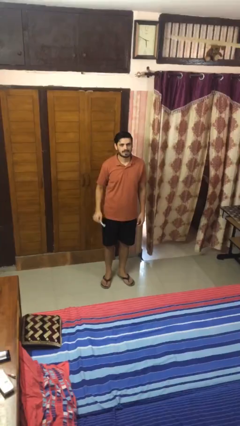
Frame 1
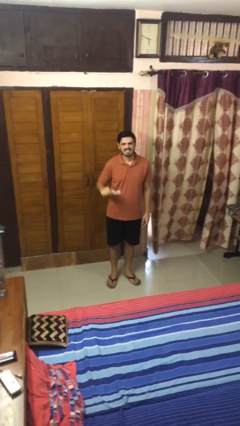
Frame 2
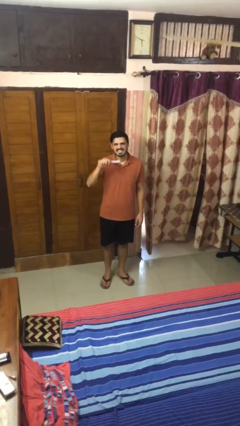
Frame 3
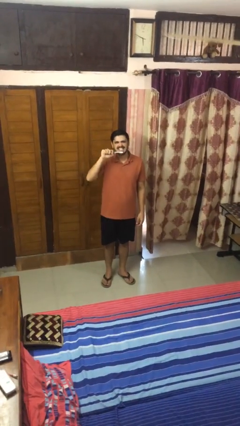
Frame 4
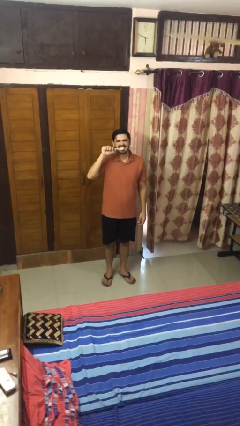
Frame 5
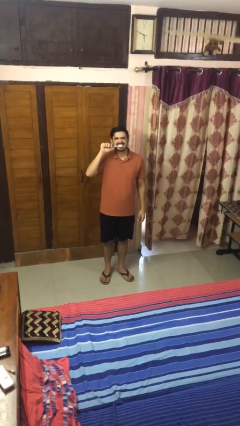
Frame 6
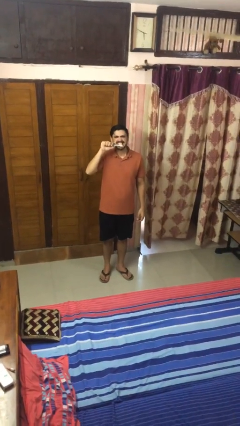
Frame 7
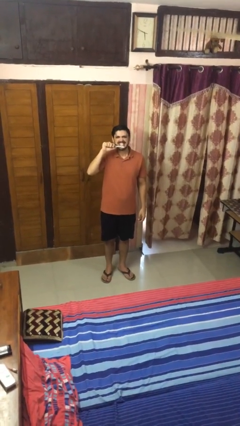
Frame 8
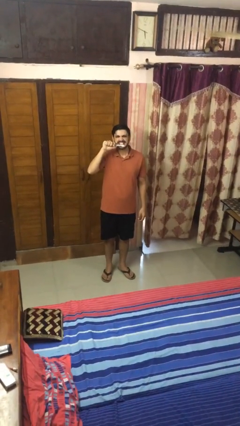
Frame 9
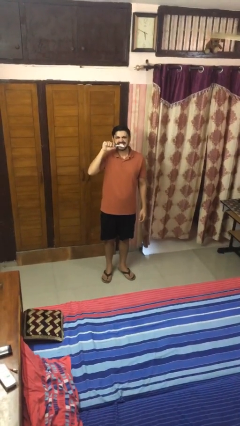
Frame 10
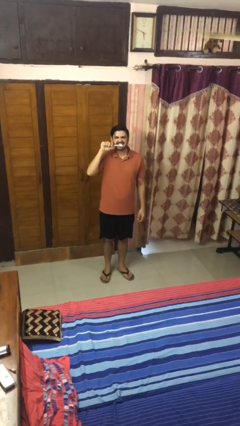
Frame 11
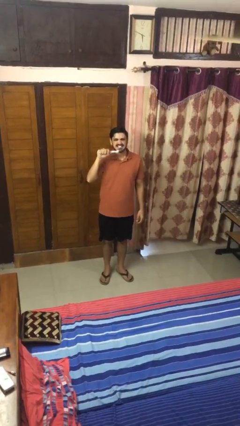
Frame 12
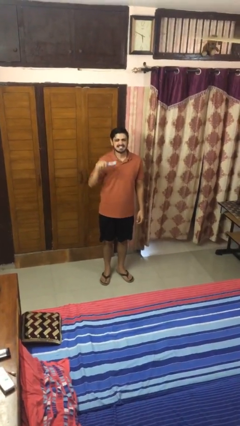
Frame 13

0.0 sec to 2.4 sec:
person brushes teeth

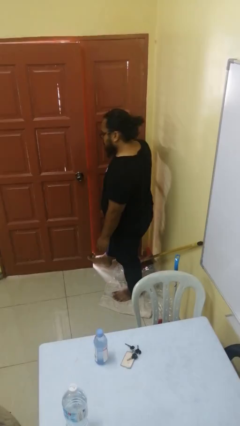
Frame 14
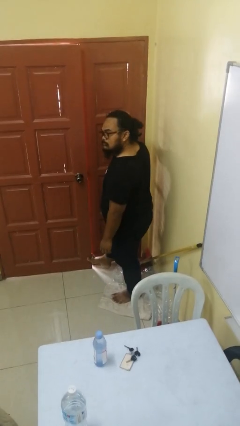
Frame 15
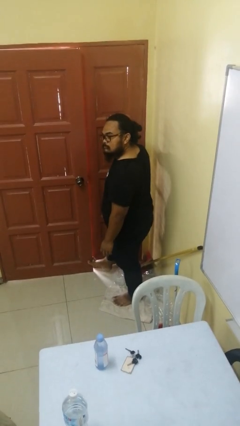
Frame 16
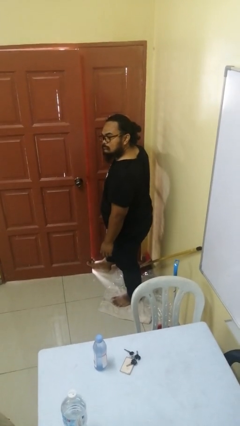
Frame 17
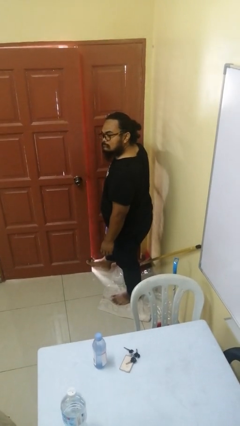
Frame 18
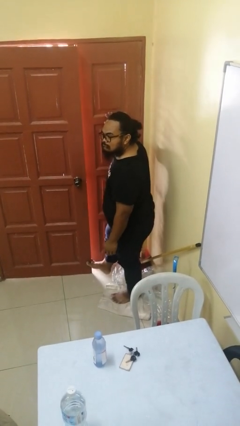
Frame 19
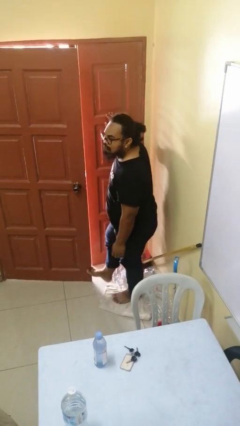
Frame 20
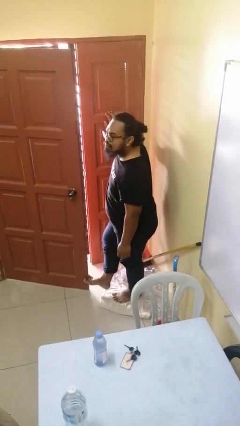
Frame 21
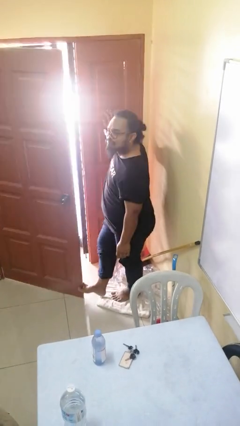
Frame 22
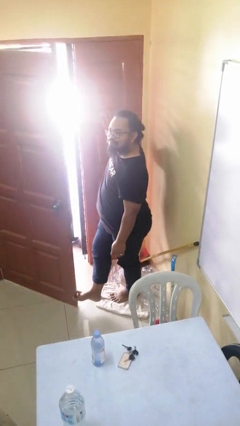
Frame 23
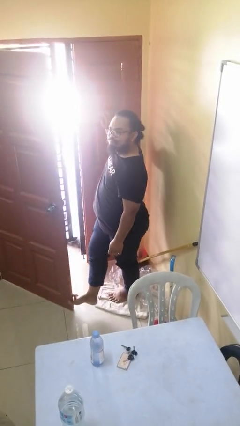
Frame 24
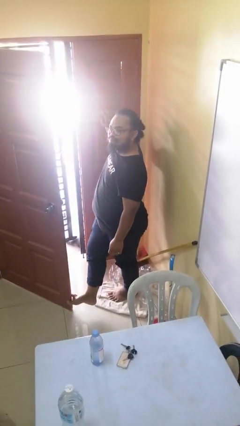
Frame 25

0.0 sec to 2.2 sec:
person opens facility door

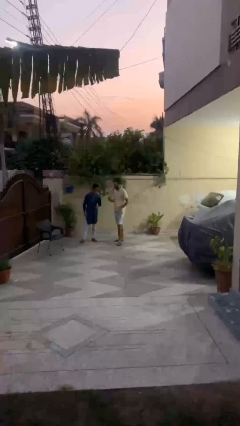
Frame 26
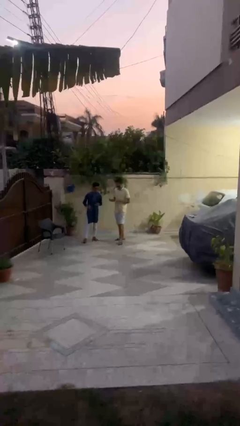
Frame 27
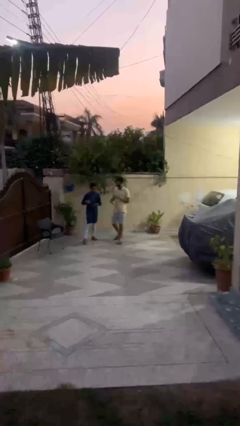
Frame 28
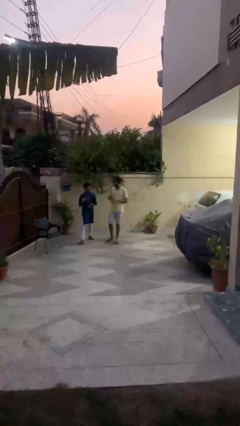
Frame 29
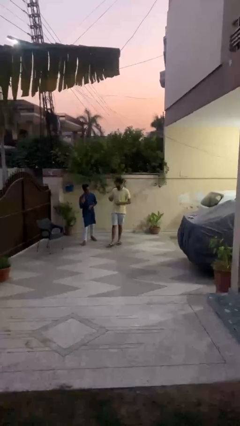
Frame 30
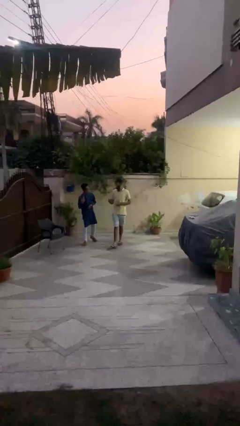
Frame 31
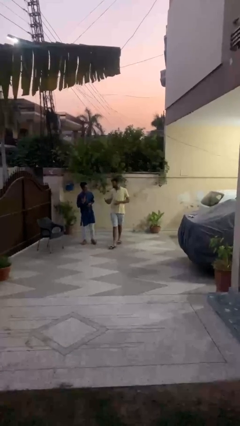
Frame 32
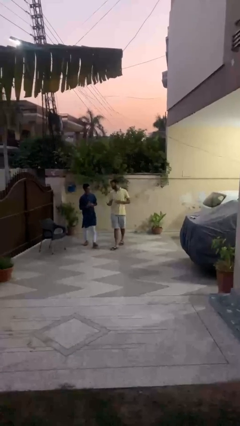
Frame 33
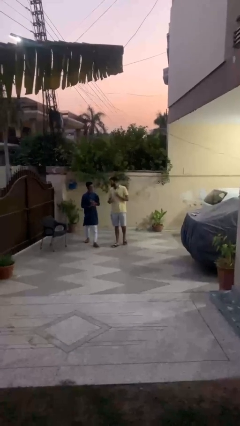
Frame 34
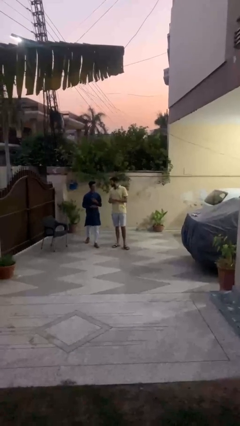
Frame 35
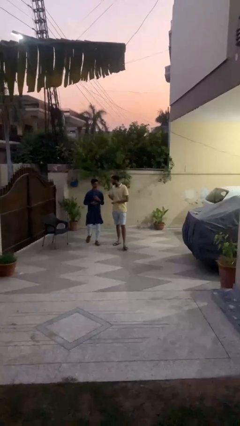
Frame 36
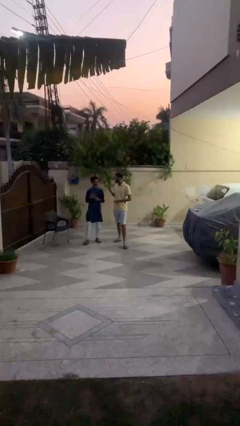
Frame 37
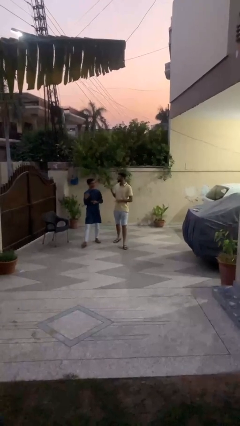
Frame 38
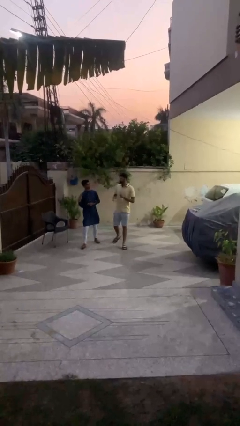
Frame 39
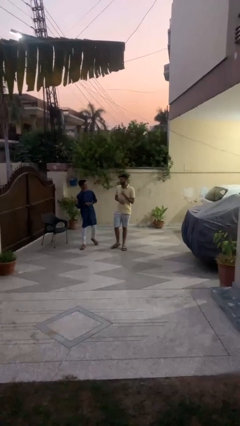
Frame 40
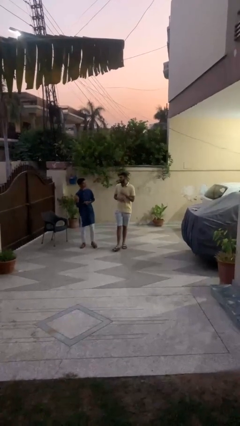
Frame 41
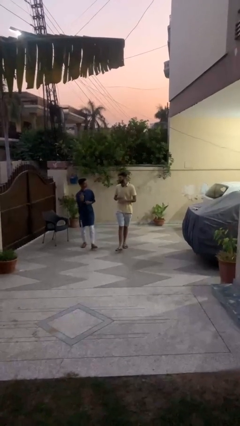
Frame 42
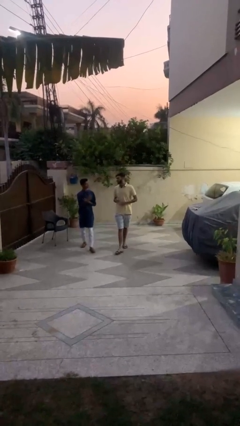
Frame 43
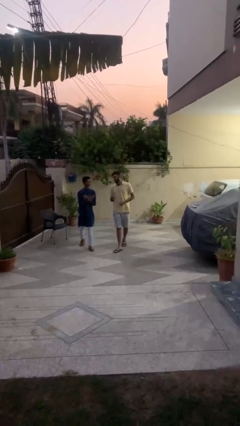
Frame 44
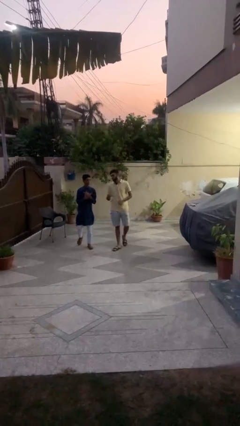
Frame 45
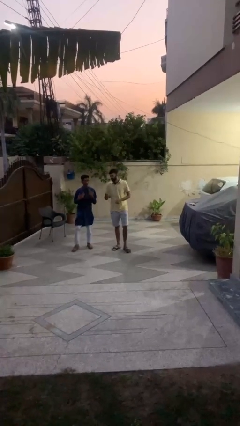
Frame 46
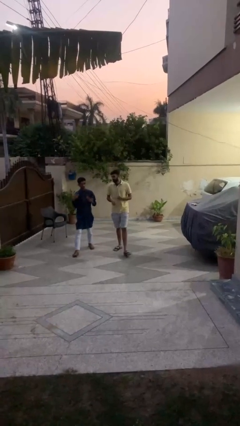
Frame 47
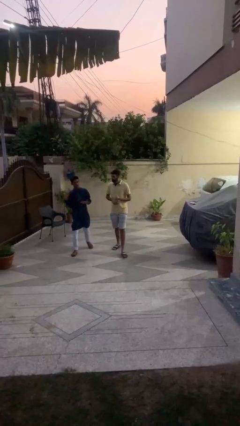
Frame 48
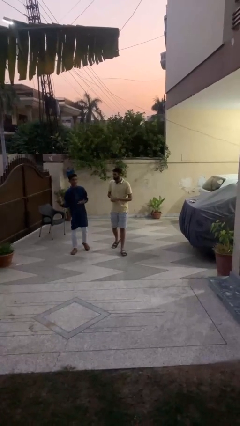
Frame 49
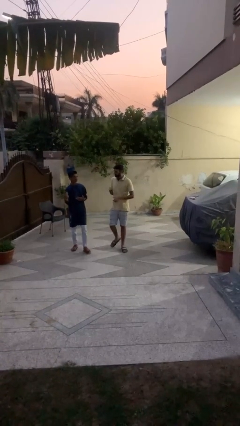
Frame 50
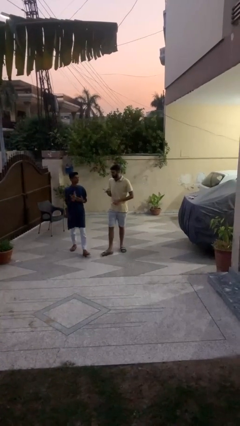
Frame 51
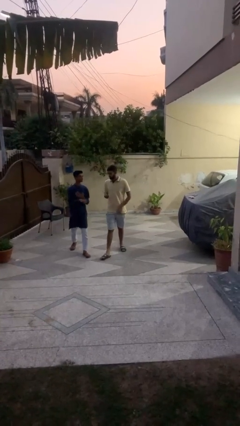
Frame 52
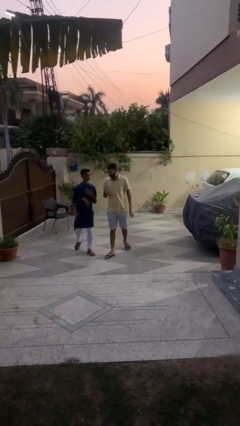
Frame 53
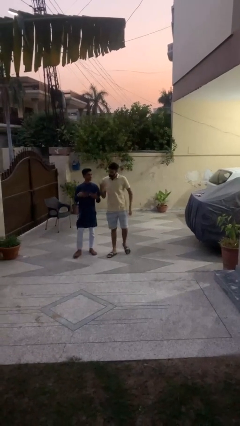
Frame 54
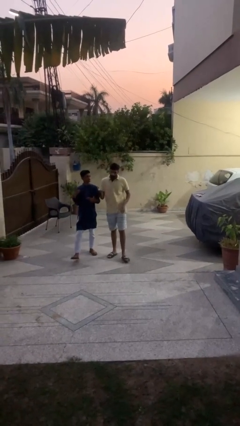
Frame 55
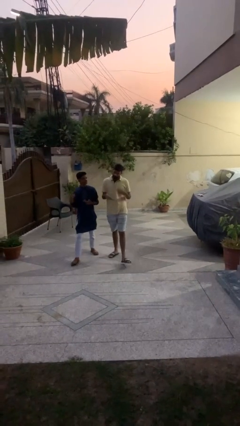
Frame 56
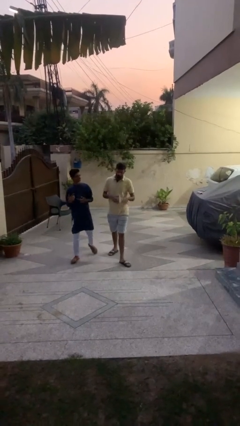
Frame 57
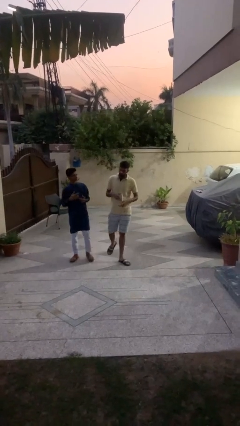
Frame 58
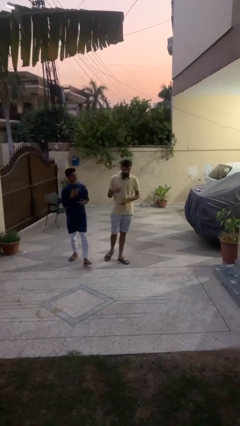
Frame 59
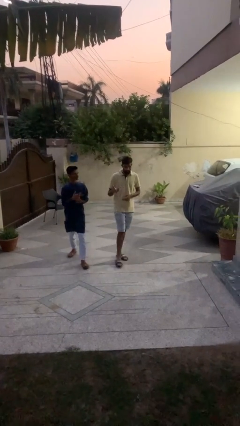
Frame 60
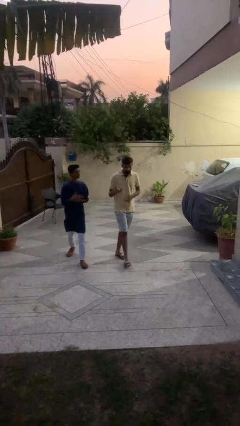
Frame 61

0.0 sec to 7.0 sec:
person talks to person

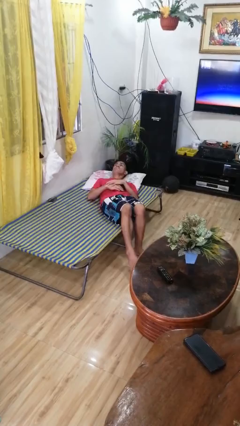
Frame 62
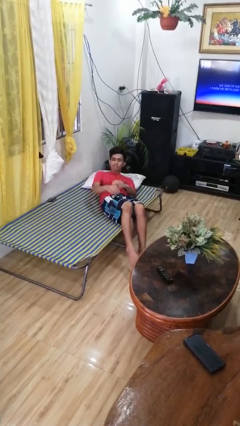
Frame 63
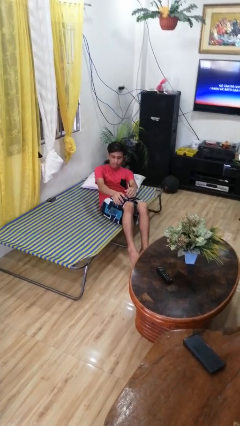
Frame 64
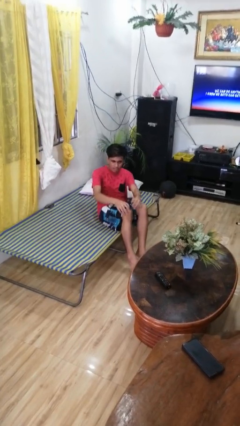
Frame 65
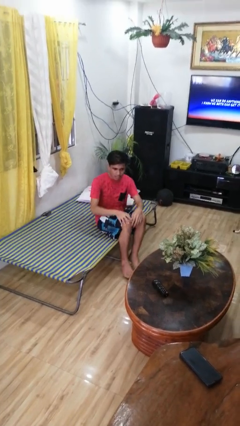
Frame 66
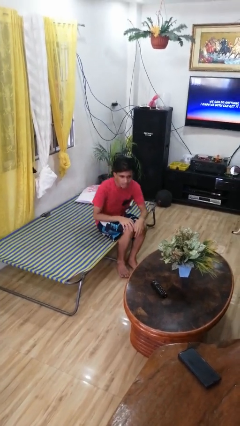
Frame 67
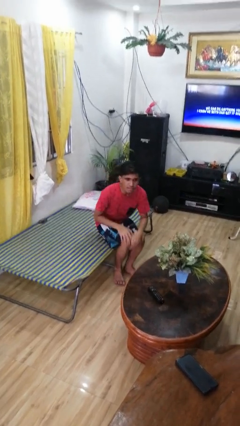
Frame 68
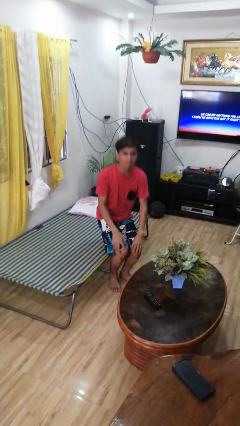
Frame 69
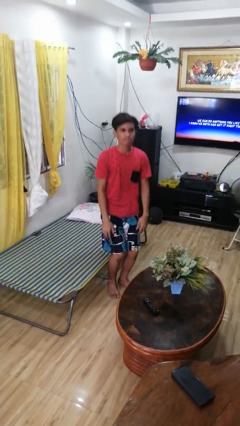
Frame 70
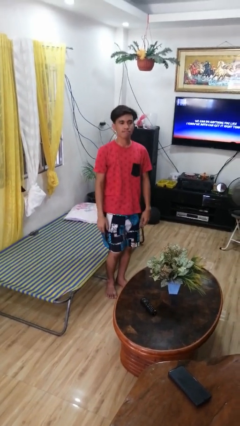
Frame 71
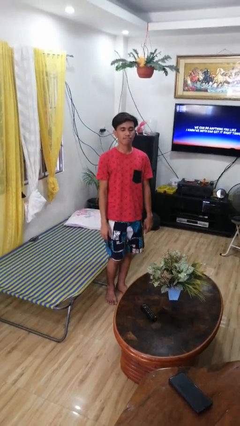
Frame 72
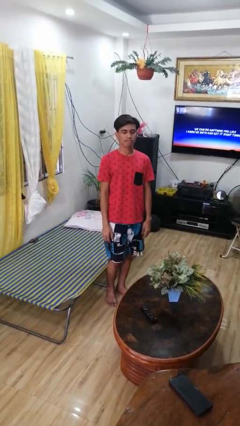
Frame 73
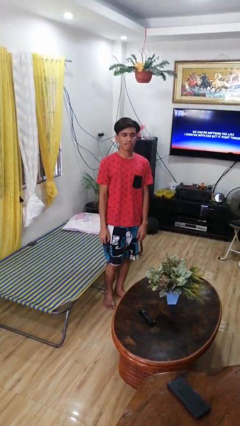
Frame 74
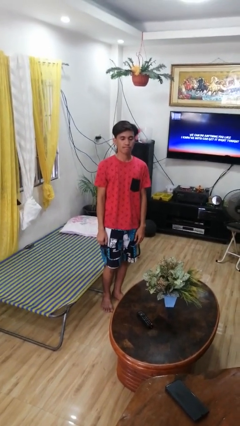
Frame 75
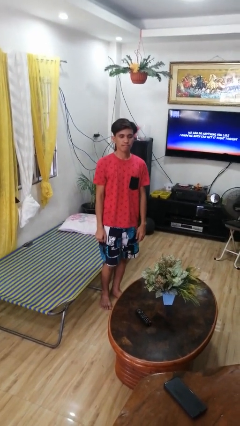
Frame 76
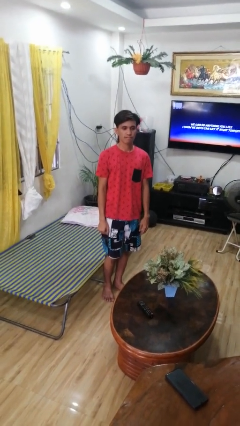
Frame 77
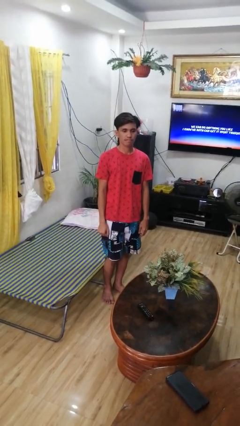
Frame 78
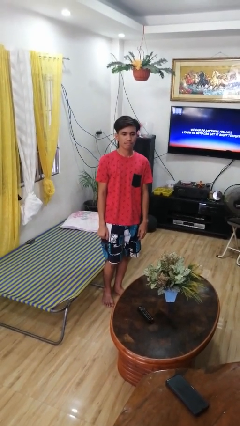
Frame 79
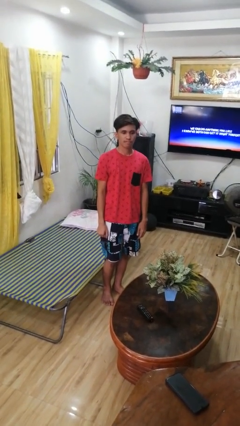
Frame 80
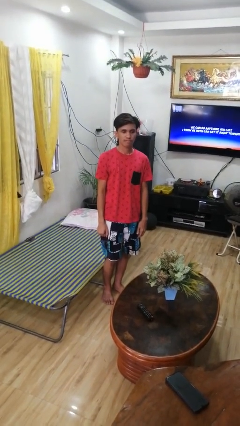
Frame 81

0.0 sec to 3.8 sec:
person stands up

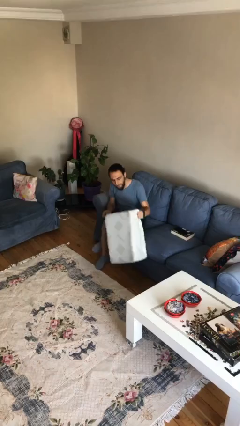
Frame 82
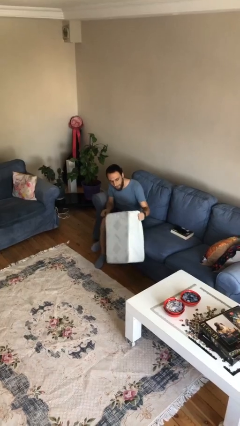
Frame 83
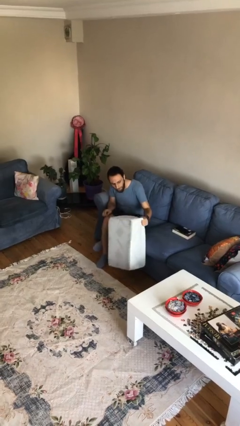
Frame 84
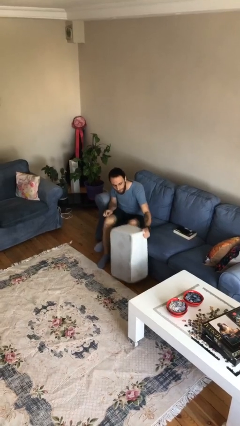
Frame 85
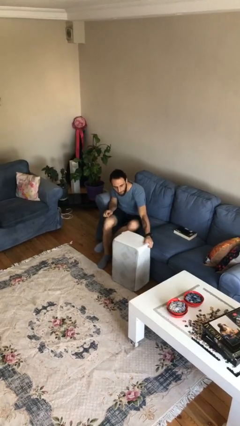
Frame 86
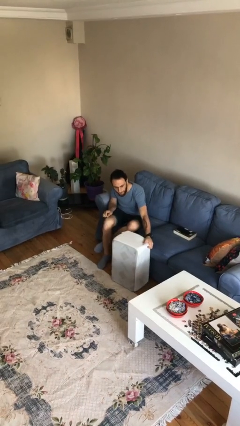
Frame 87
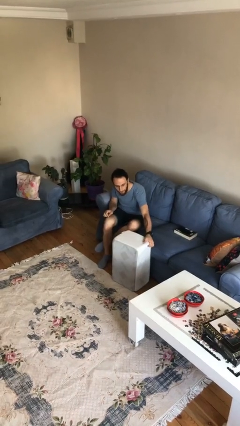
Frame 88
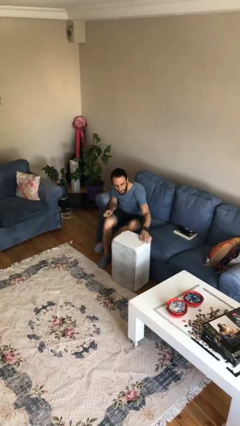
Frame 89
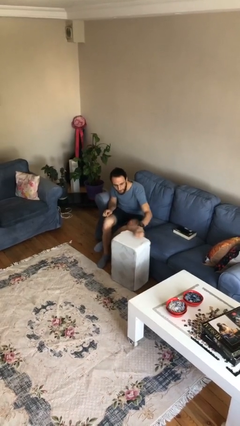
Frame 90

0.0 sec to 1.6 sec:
person puts down object on floor

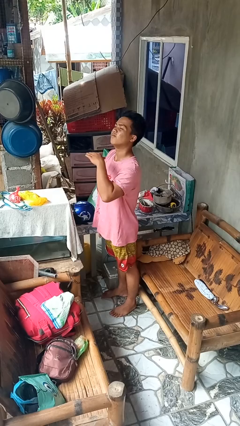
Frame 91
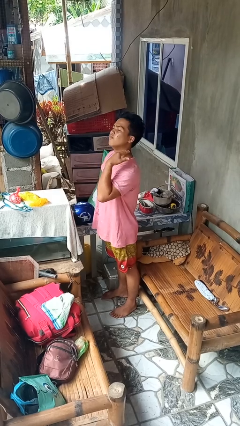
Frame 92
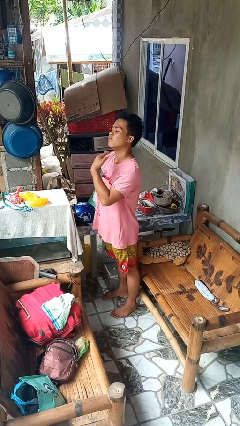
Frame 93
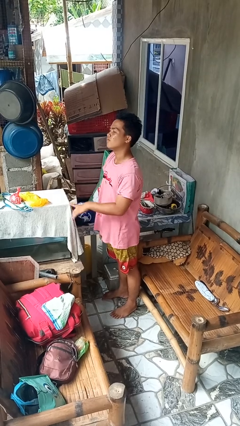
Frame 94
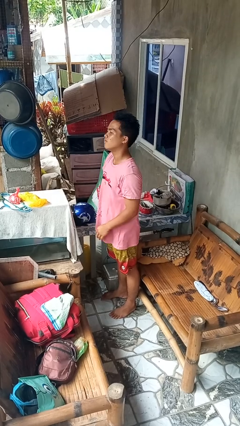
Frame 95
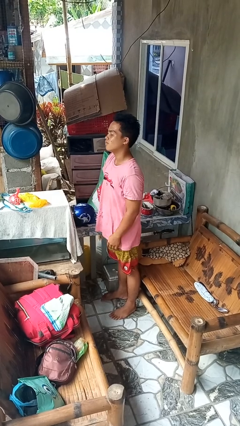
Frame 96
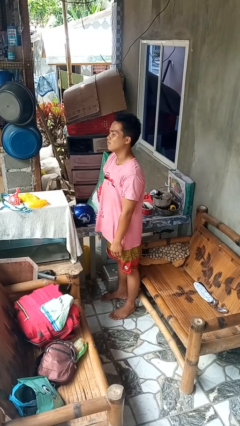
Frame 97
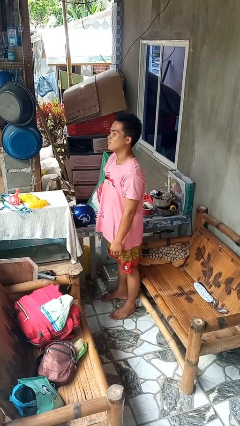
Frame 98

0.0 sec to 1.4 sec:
person gestures cut
